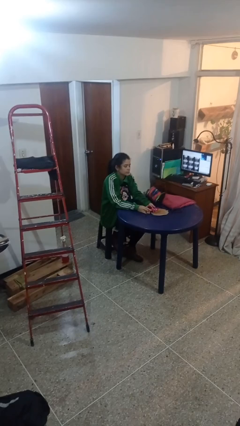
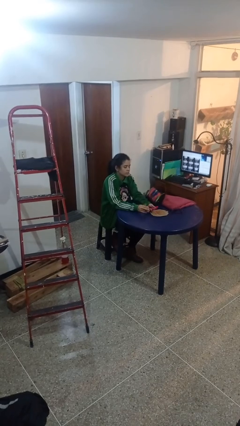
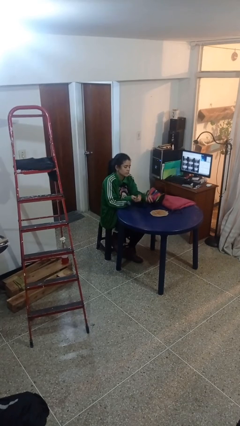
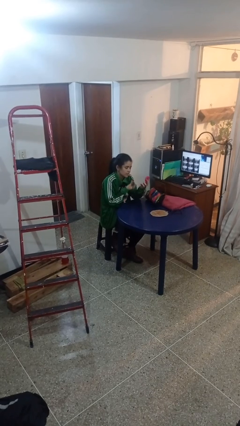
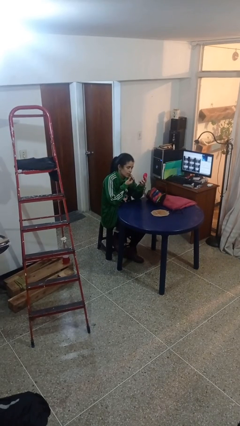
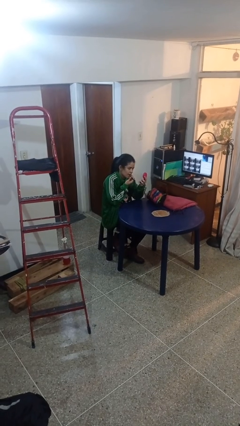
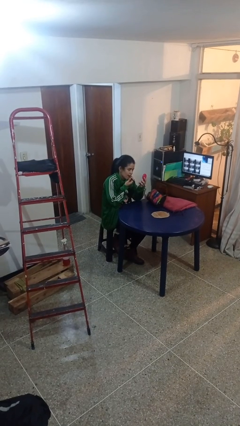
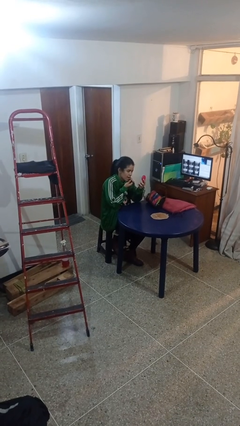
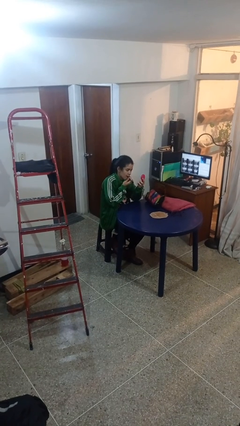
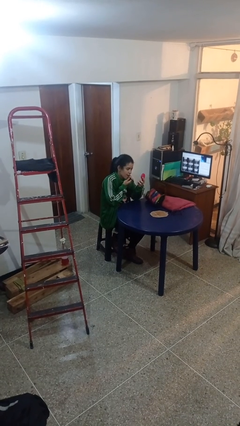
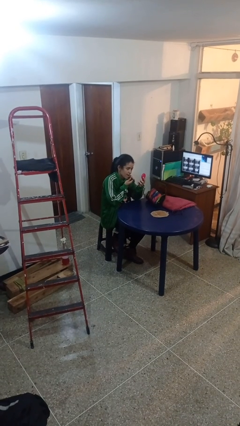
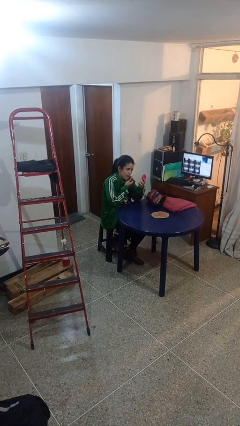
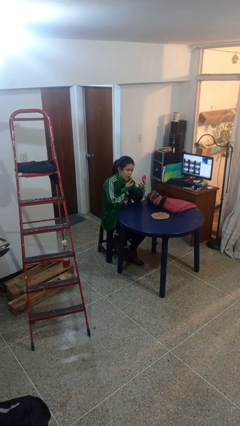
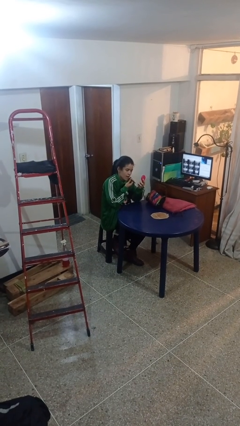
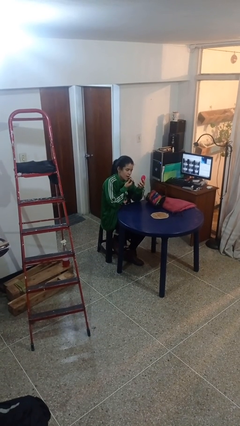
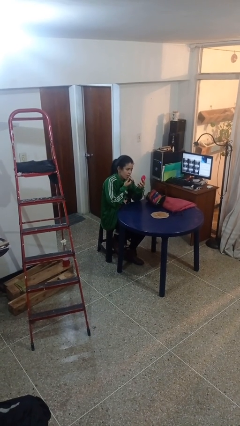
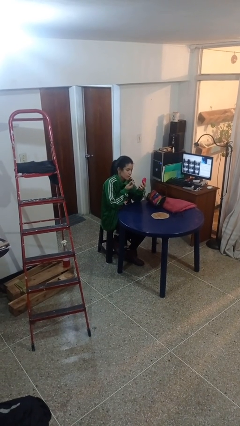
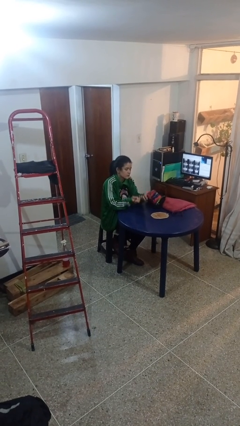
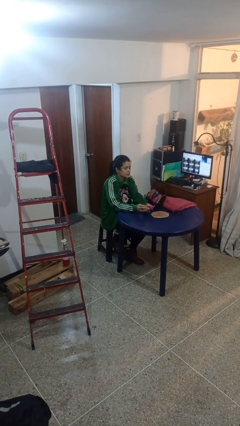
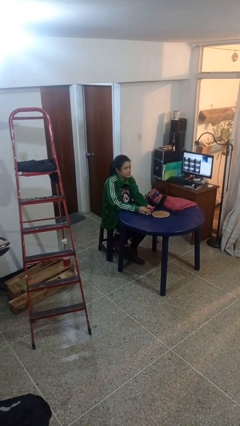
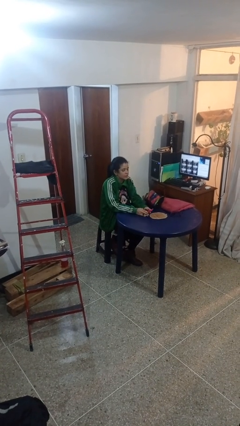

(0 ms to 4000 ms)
person applies lip makeup

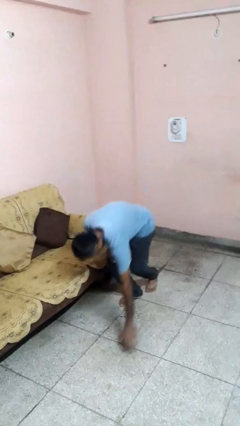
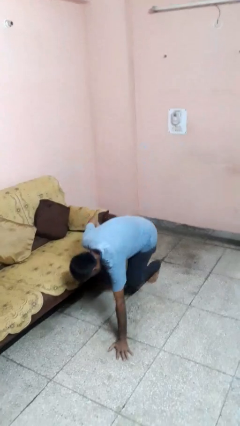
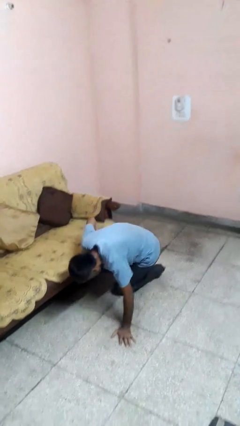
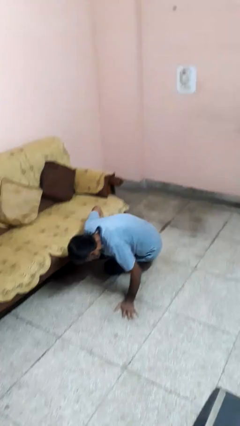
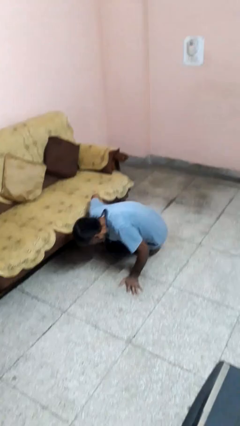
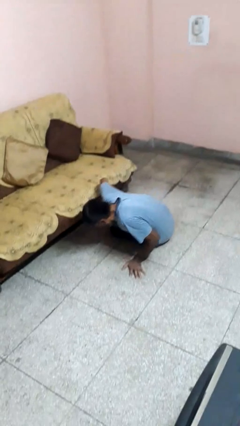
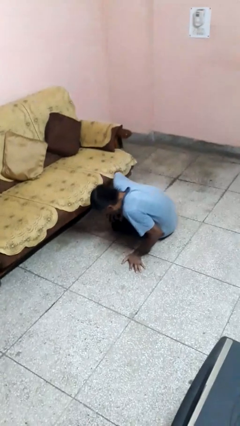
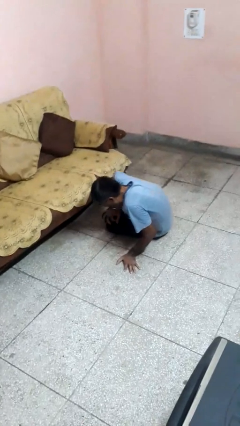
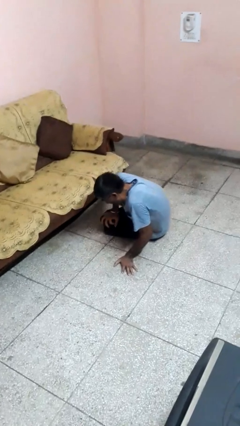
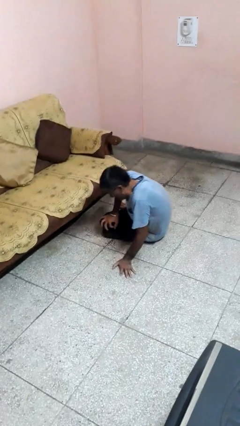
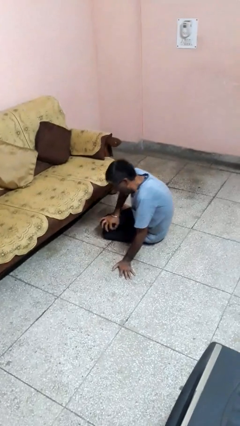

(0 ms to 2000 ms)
person lies down on floor

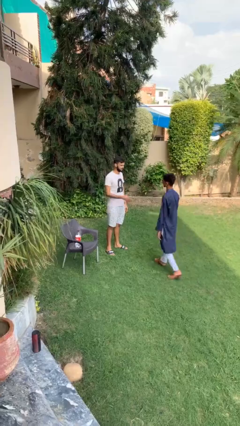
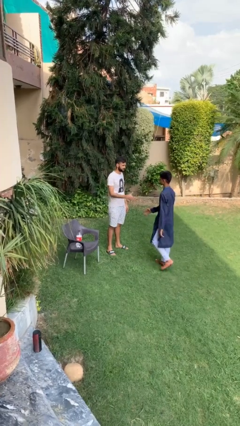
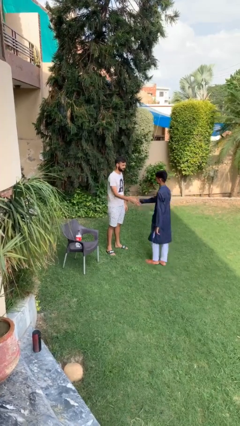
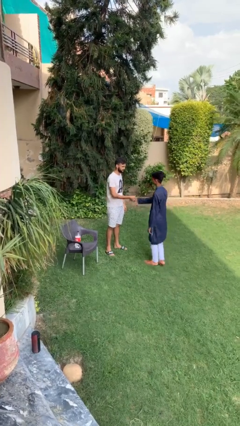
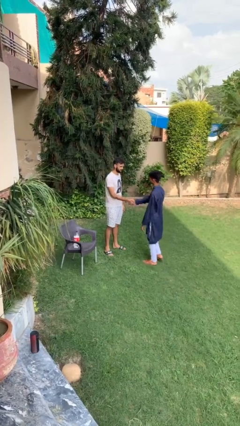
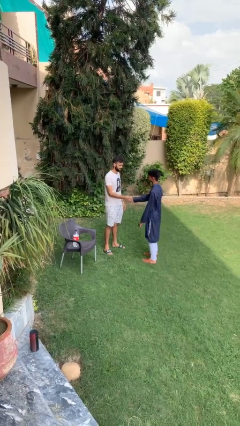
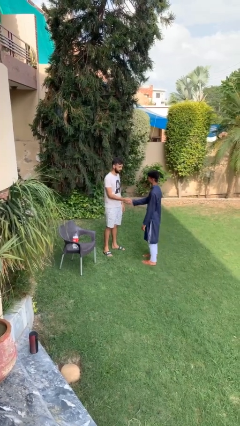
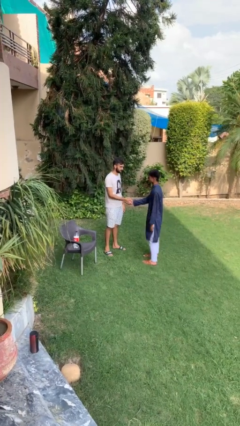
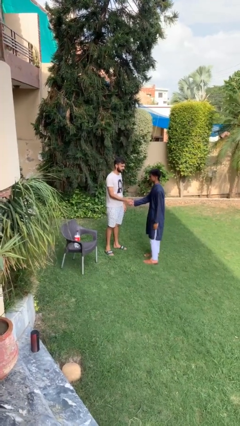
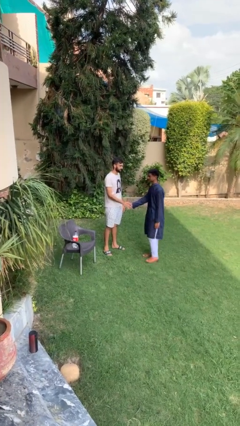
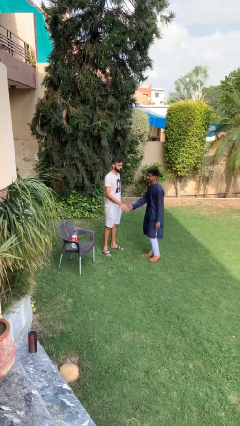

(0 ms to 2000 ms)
person shakes hand

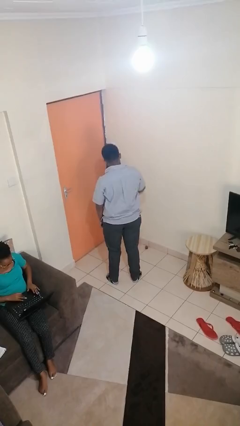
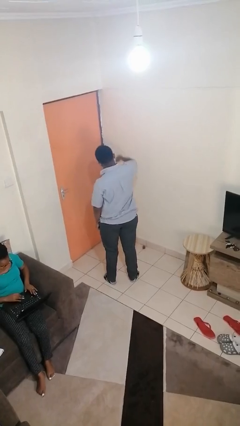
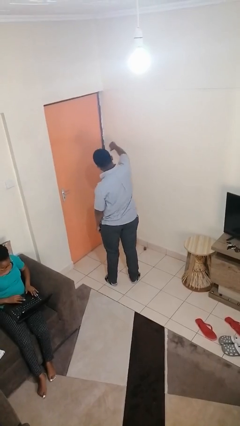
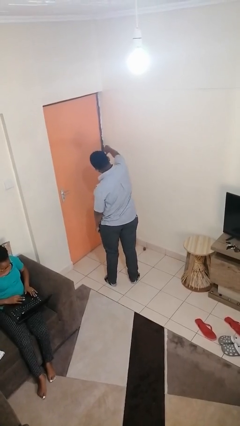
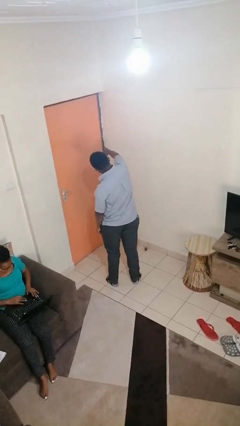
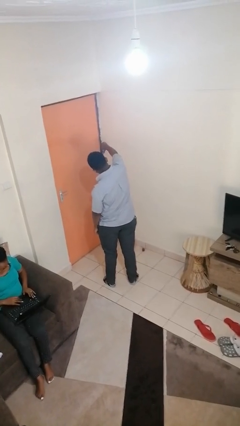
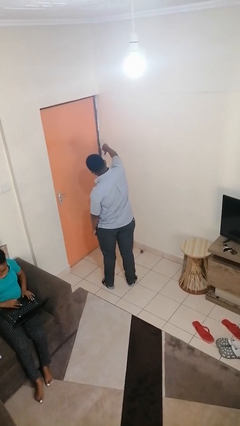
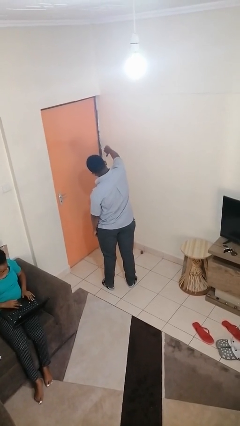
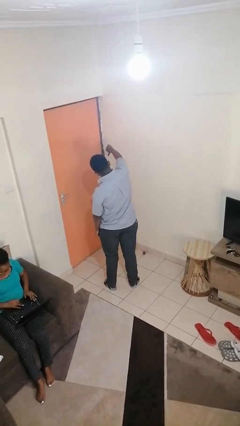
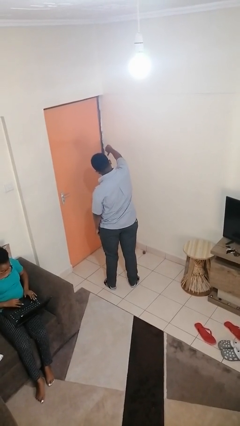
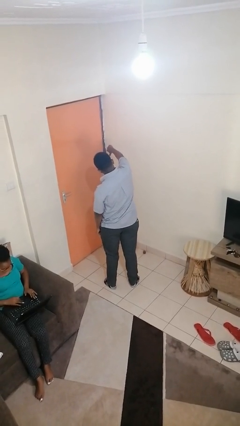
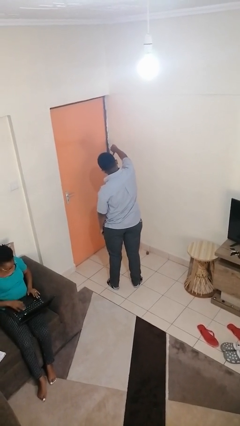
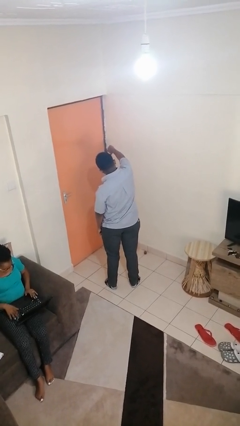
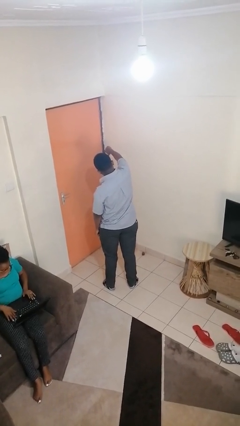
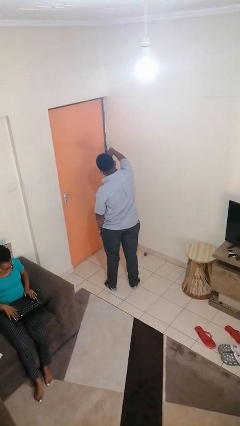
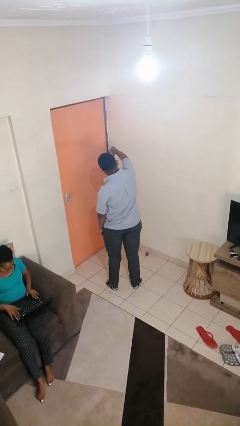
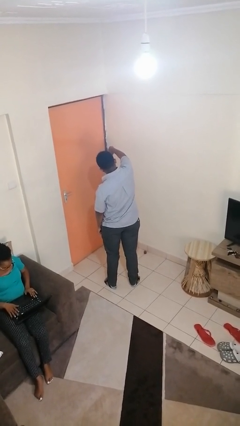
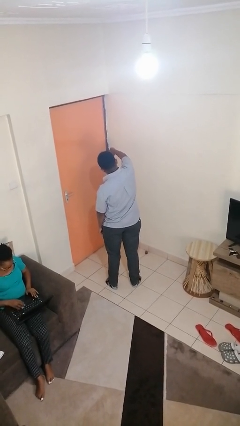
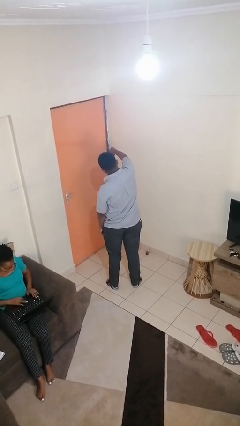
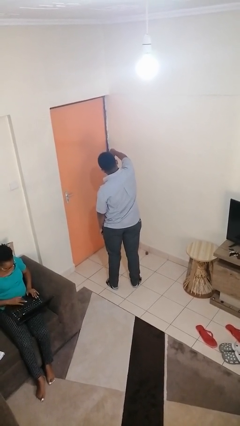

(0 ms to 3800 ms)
person gestures thumbs down

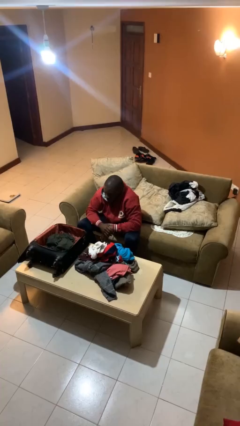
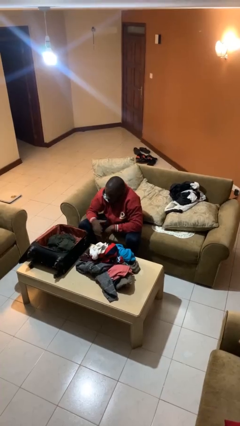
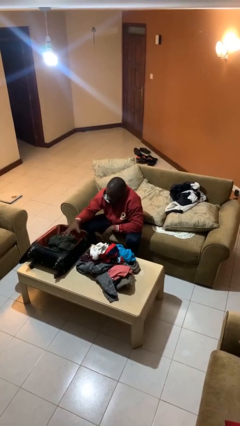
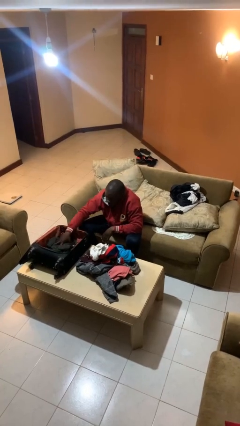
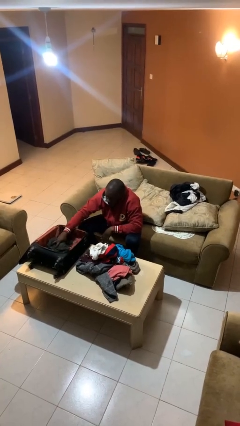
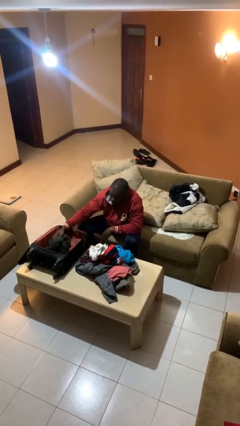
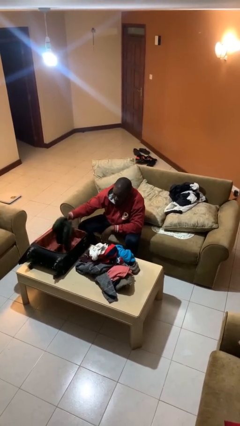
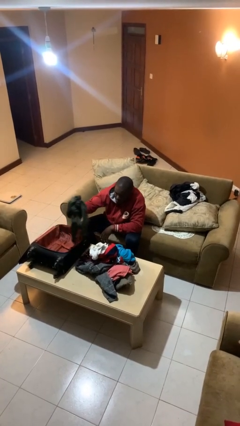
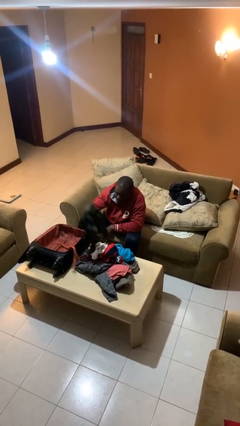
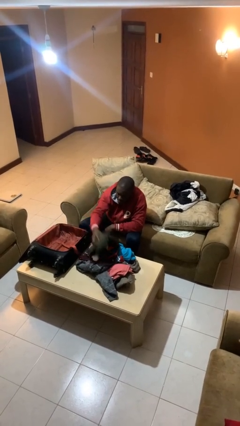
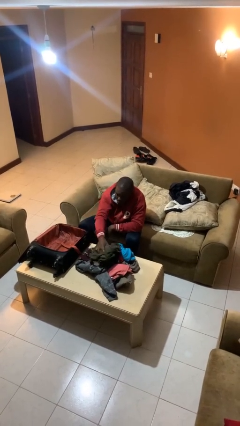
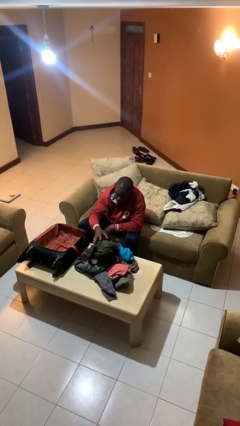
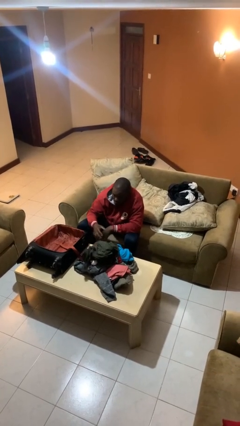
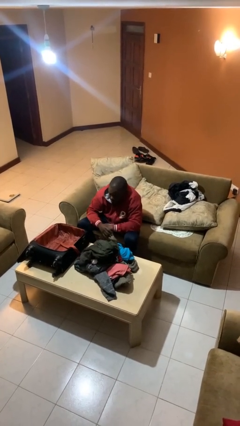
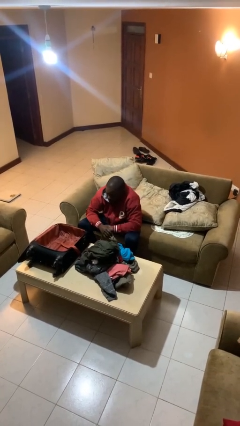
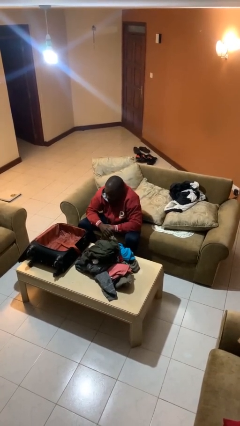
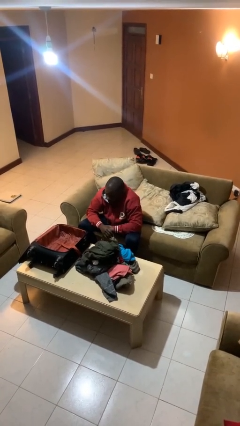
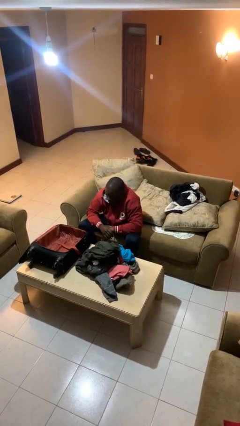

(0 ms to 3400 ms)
person unloads clothes from suitcase

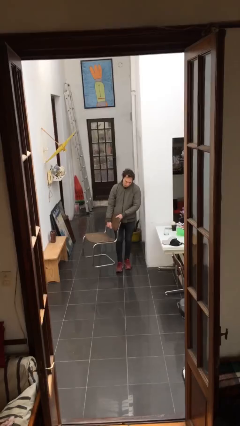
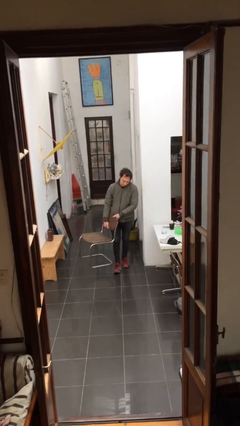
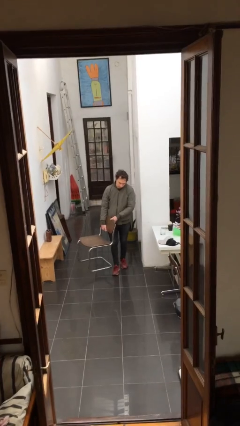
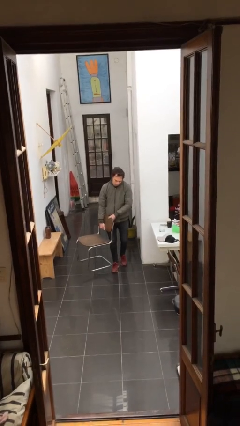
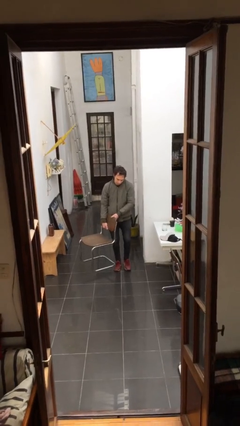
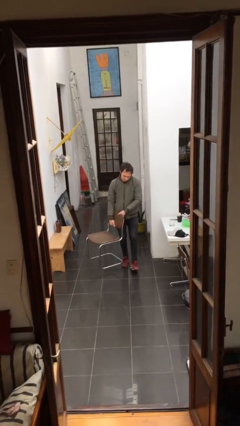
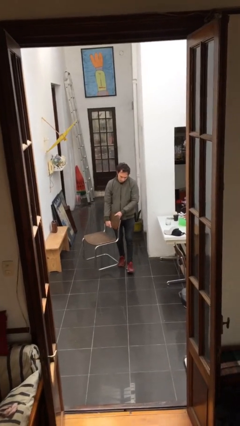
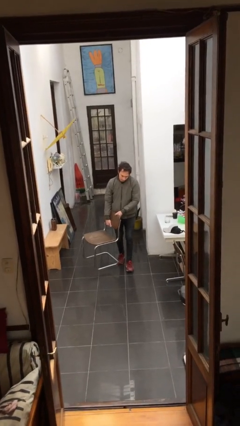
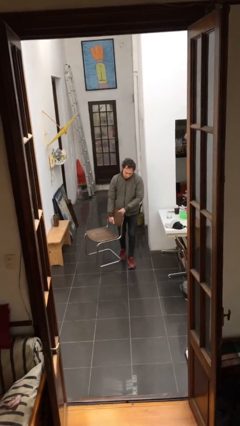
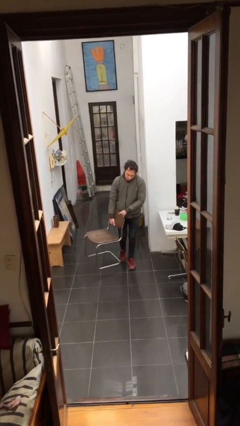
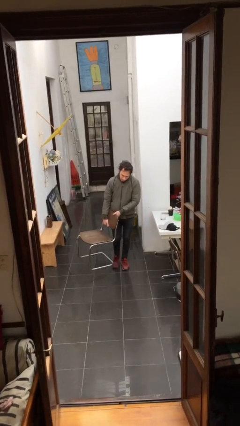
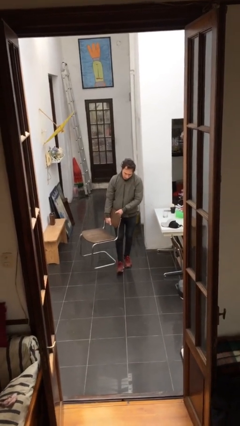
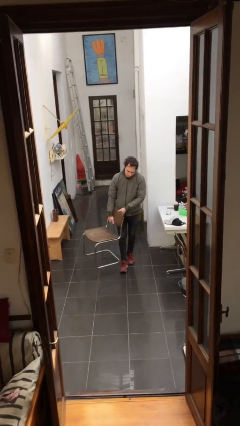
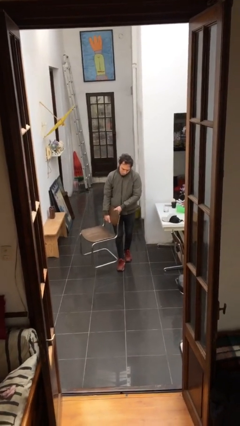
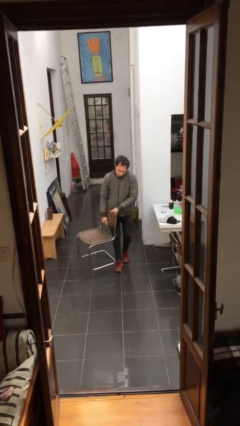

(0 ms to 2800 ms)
person carries heavy object
